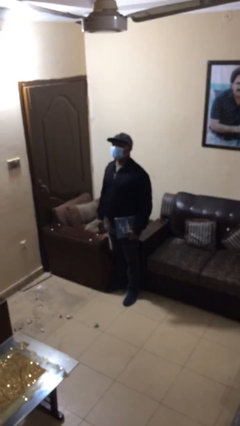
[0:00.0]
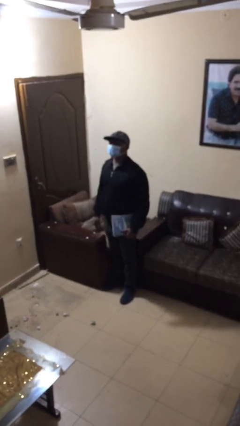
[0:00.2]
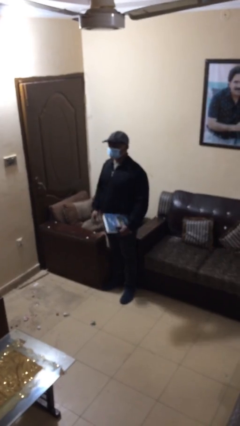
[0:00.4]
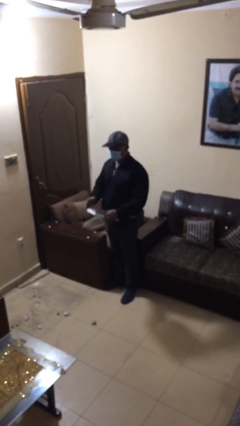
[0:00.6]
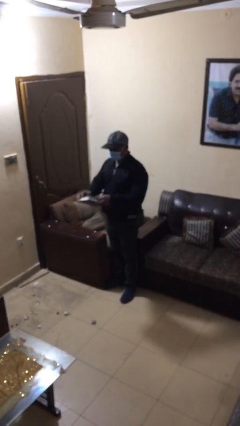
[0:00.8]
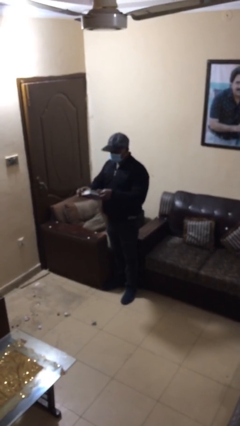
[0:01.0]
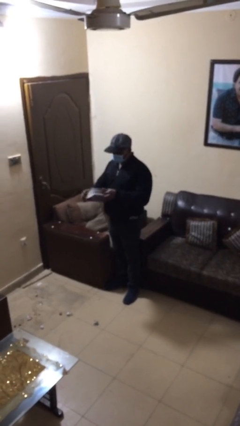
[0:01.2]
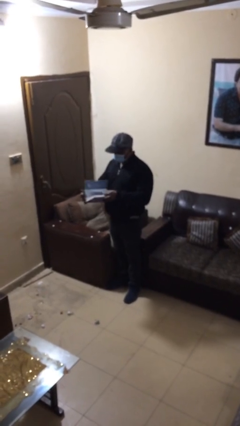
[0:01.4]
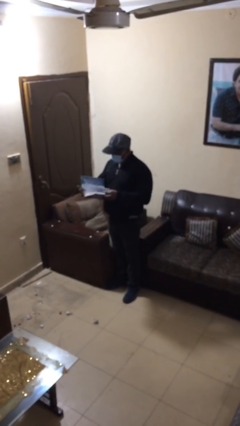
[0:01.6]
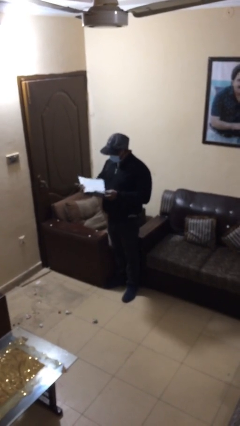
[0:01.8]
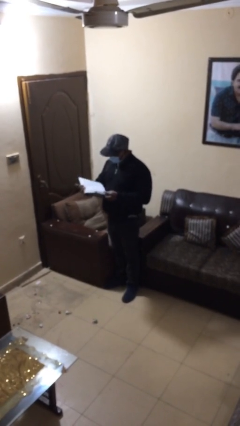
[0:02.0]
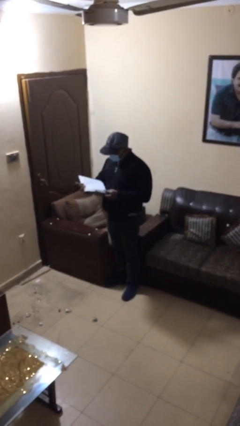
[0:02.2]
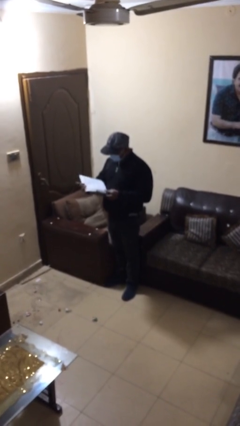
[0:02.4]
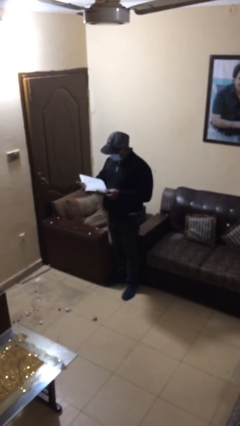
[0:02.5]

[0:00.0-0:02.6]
person reads document

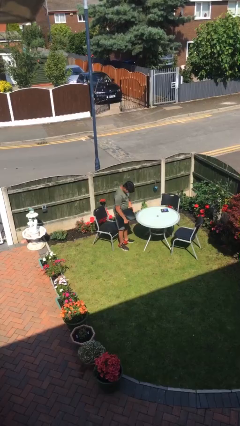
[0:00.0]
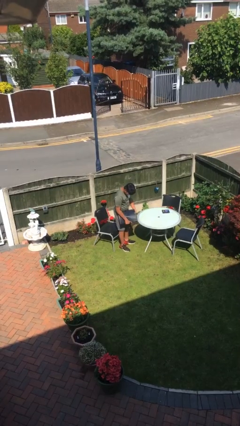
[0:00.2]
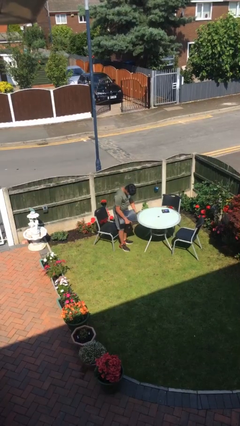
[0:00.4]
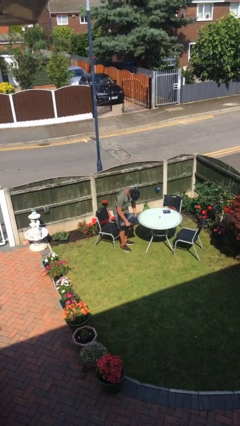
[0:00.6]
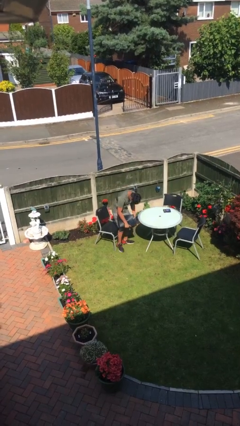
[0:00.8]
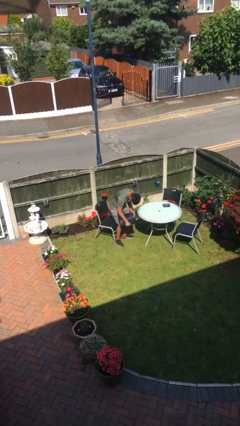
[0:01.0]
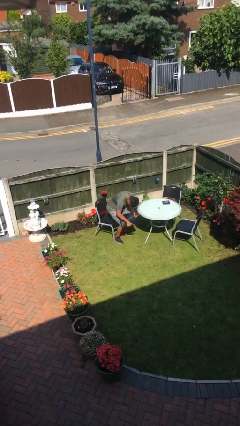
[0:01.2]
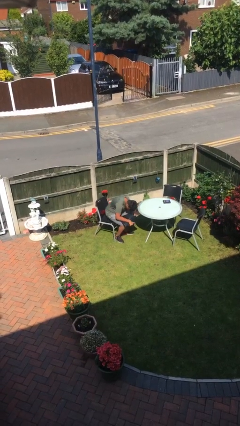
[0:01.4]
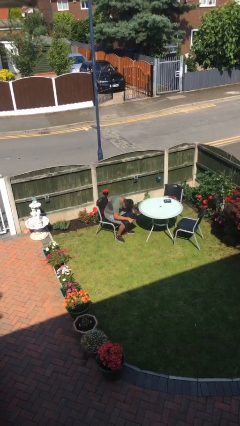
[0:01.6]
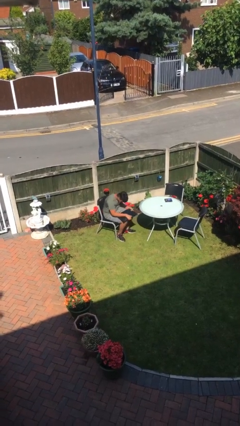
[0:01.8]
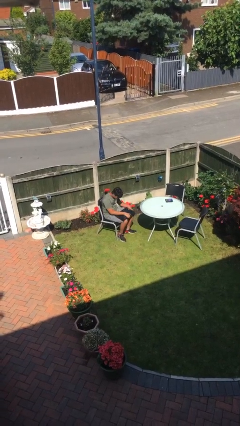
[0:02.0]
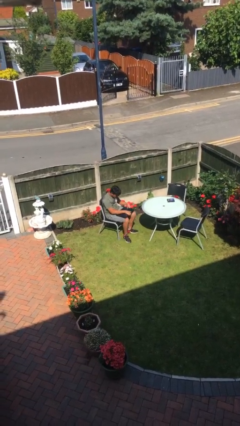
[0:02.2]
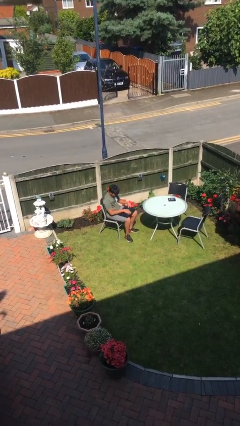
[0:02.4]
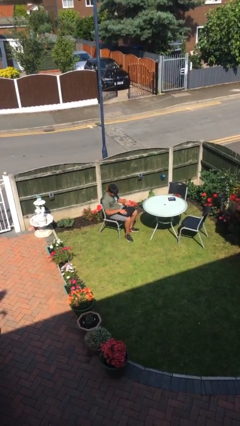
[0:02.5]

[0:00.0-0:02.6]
person sits down

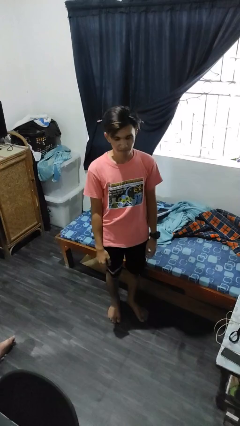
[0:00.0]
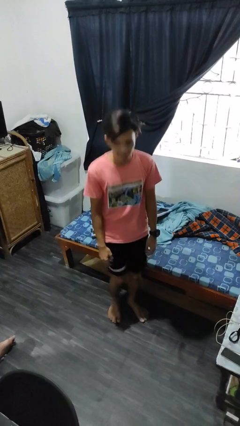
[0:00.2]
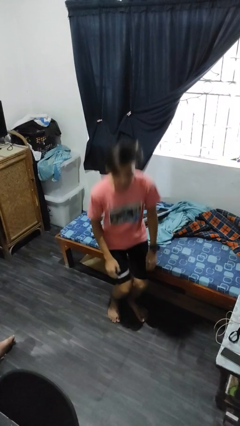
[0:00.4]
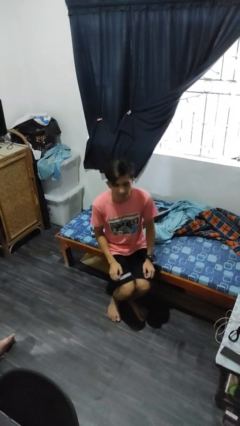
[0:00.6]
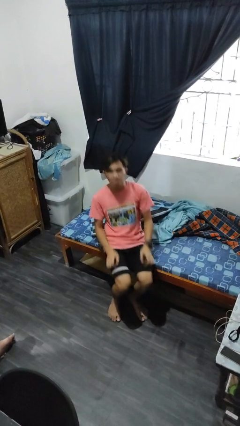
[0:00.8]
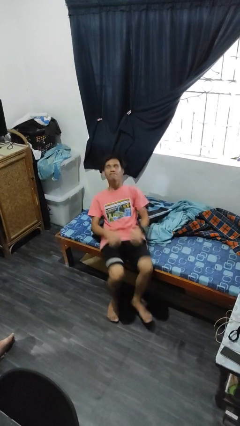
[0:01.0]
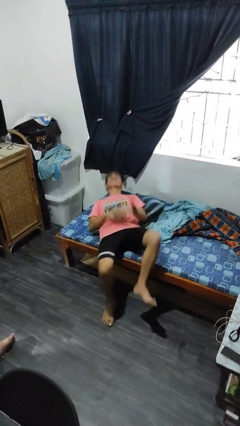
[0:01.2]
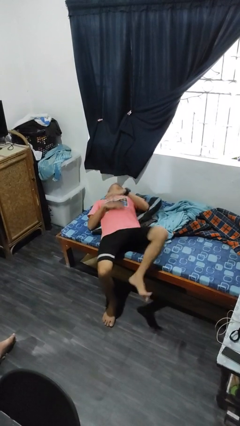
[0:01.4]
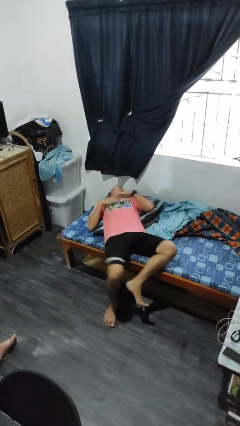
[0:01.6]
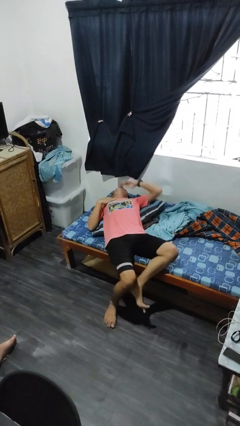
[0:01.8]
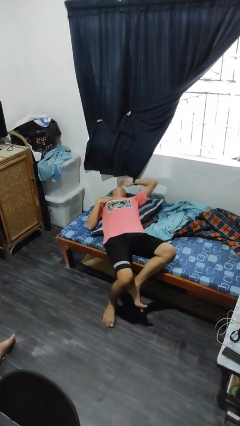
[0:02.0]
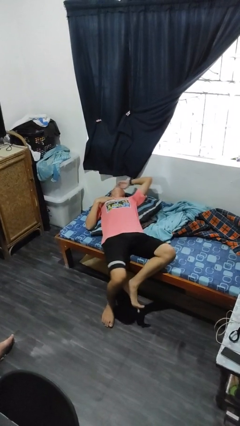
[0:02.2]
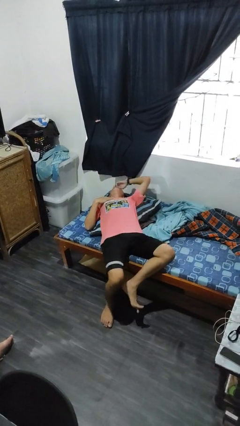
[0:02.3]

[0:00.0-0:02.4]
person lies down on bed

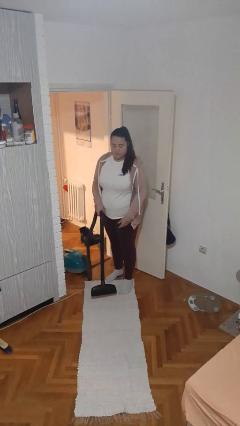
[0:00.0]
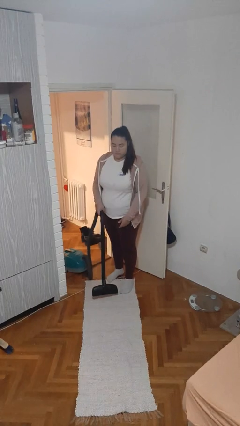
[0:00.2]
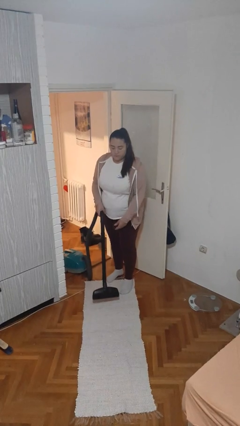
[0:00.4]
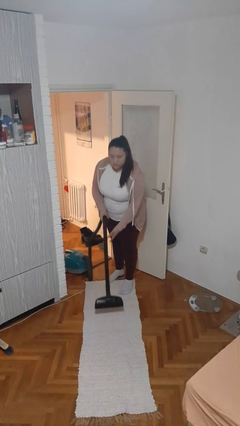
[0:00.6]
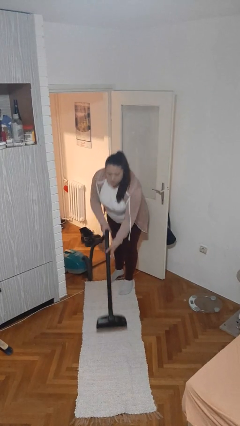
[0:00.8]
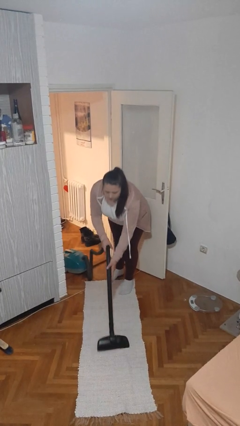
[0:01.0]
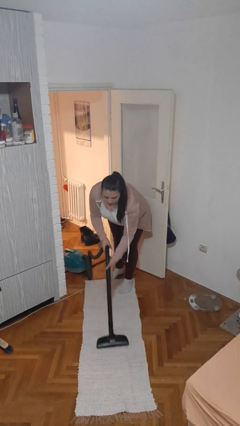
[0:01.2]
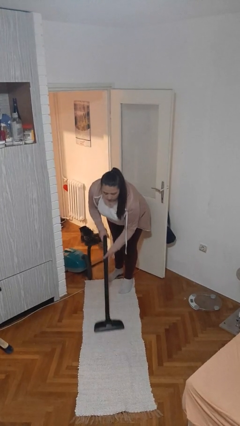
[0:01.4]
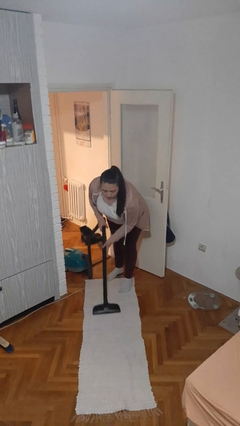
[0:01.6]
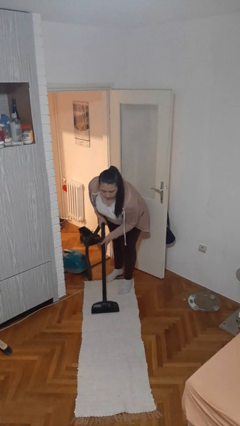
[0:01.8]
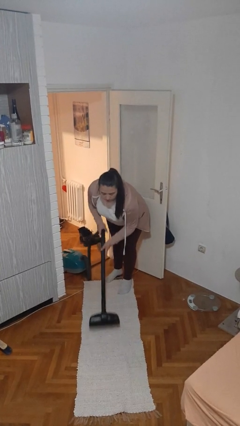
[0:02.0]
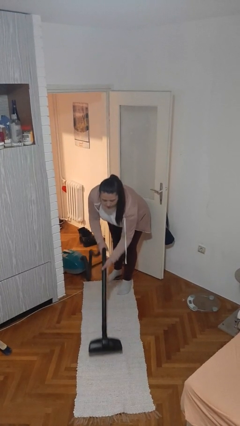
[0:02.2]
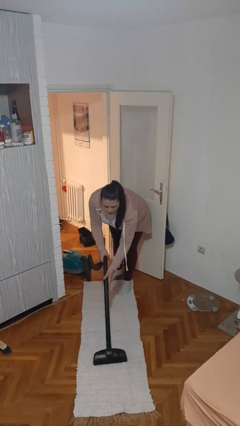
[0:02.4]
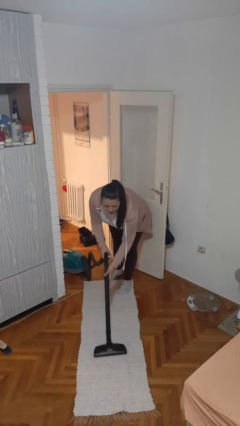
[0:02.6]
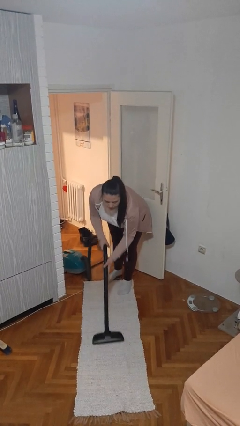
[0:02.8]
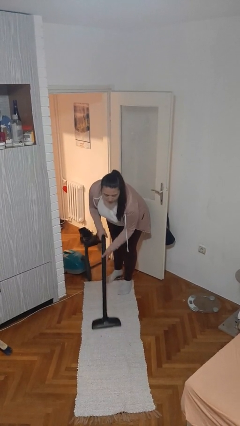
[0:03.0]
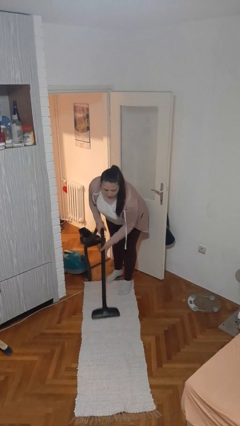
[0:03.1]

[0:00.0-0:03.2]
person vacuums carpet

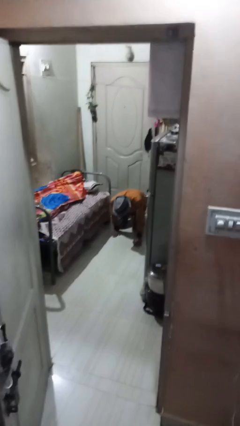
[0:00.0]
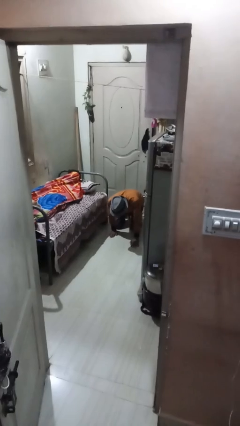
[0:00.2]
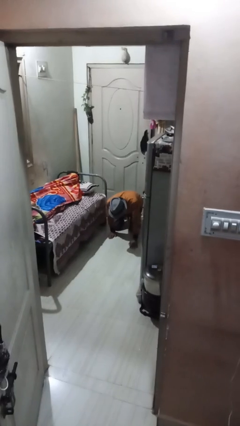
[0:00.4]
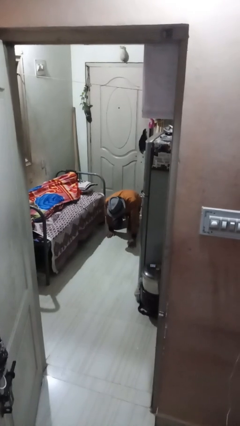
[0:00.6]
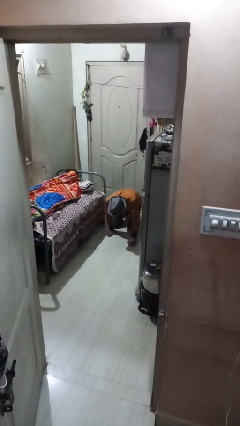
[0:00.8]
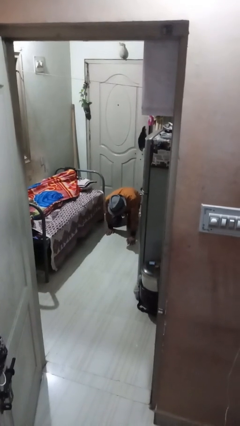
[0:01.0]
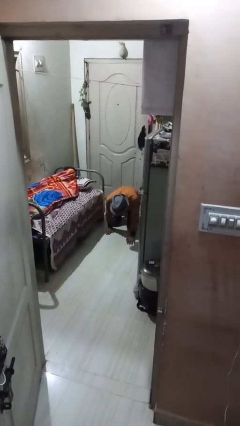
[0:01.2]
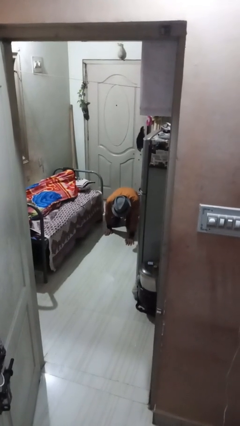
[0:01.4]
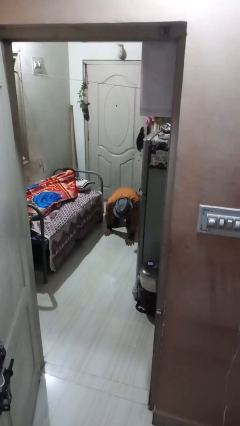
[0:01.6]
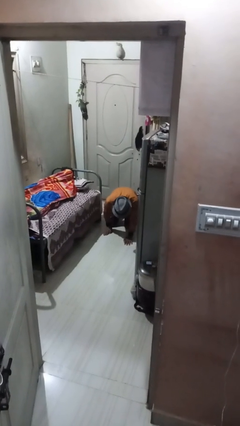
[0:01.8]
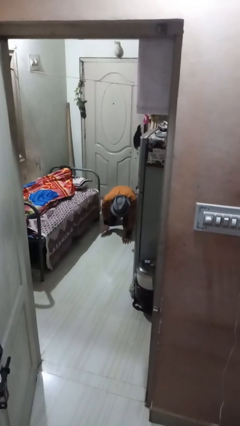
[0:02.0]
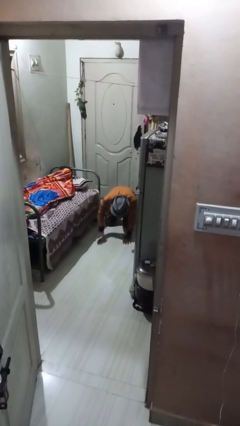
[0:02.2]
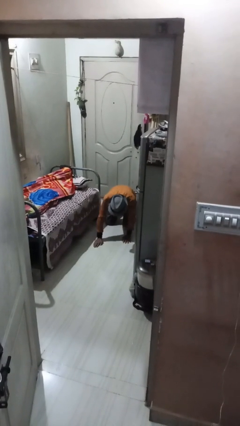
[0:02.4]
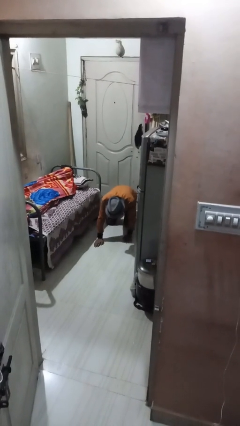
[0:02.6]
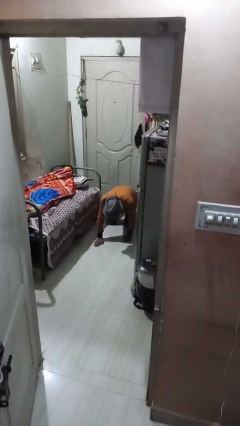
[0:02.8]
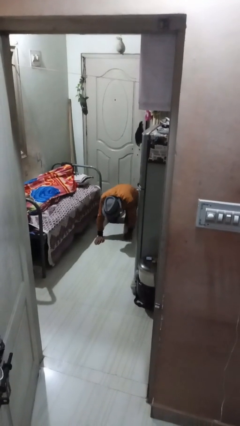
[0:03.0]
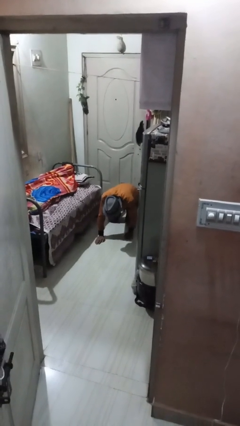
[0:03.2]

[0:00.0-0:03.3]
person crawls

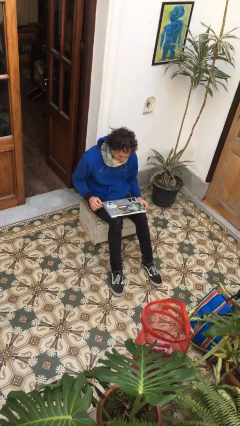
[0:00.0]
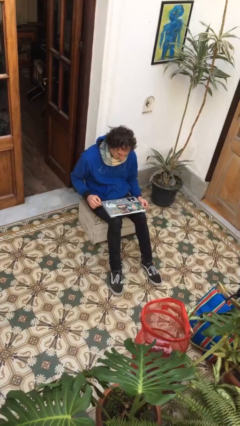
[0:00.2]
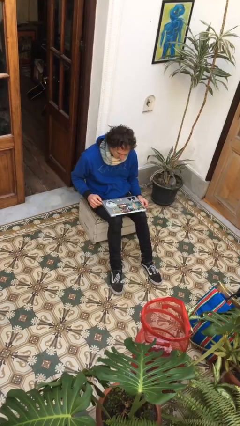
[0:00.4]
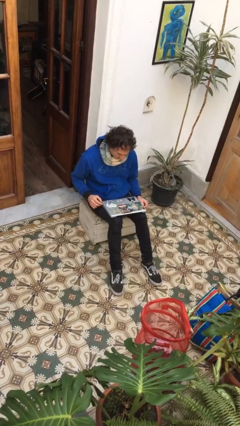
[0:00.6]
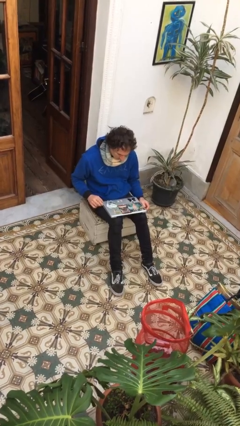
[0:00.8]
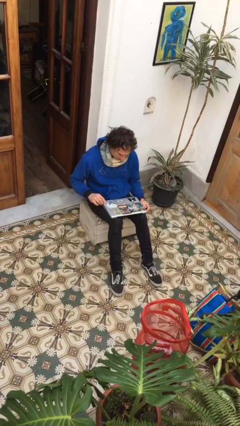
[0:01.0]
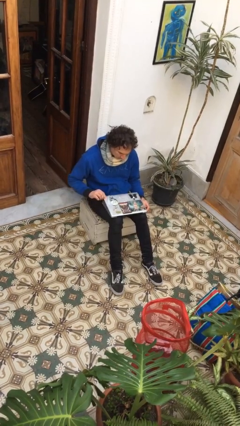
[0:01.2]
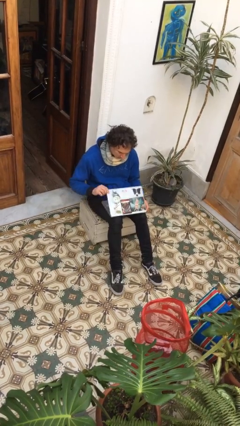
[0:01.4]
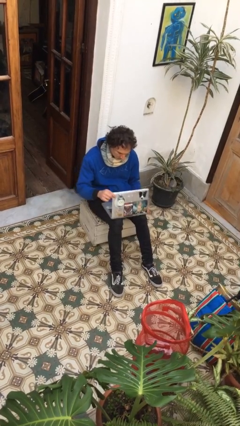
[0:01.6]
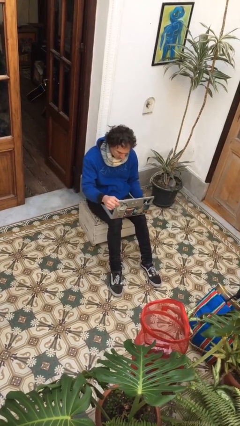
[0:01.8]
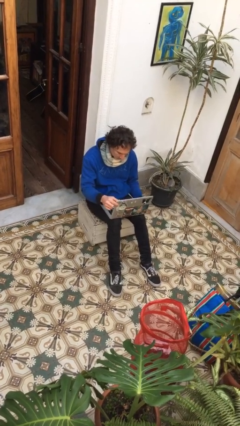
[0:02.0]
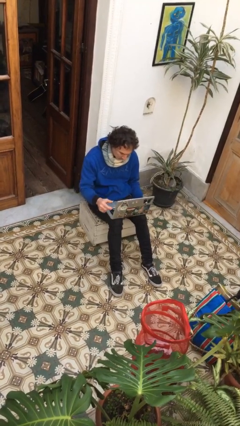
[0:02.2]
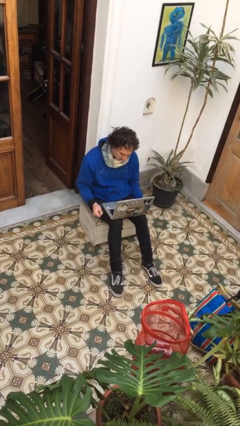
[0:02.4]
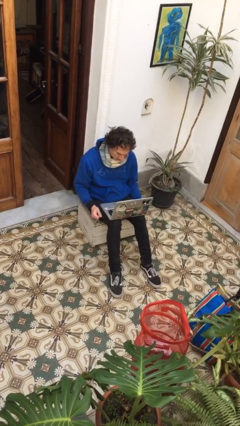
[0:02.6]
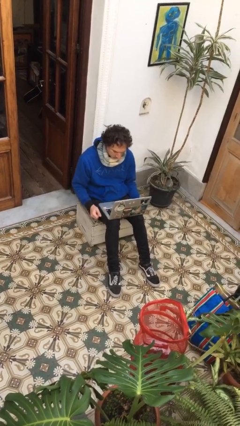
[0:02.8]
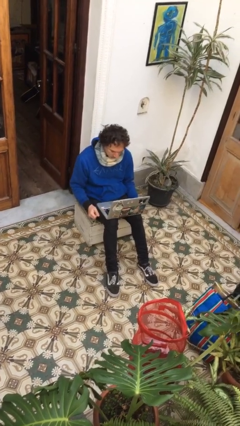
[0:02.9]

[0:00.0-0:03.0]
person opens laptop

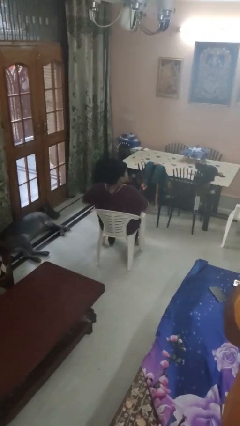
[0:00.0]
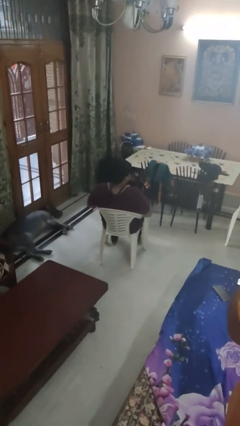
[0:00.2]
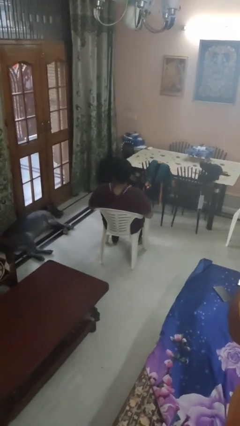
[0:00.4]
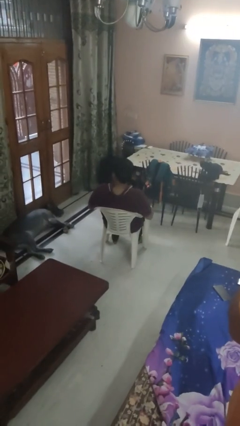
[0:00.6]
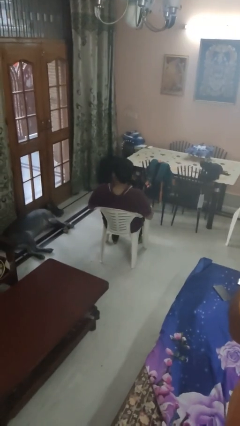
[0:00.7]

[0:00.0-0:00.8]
person shrugs
